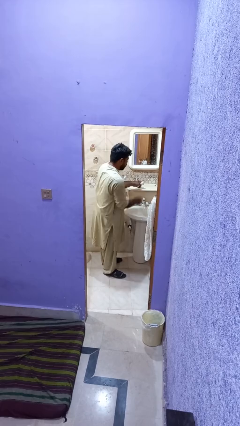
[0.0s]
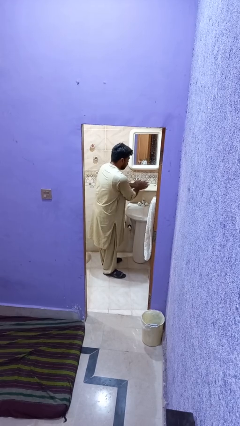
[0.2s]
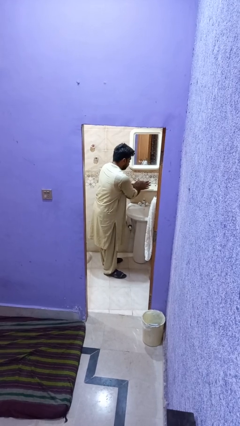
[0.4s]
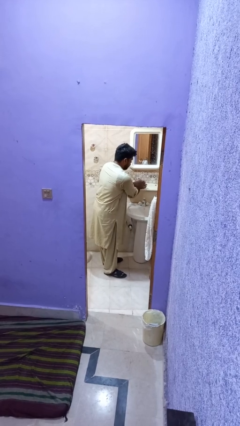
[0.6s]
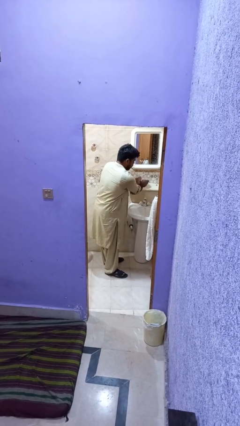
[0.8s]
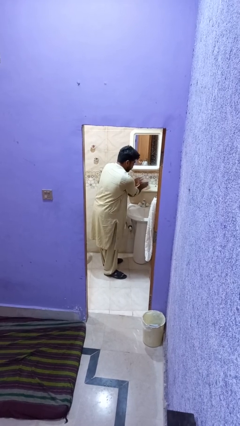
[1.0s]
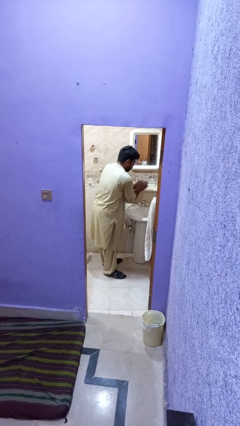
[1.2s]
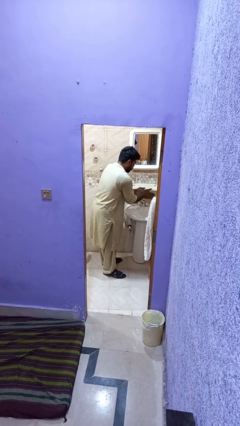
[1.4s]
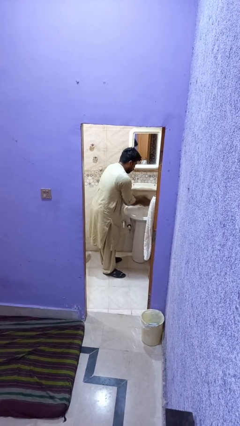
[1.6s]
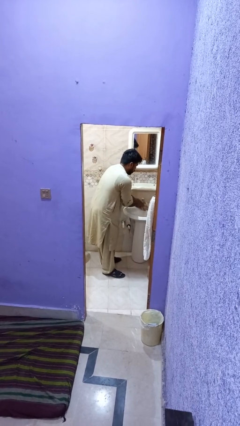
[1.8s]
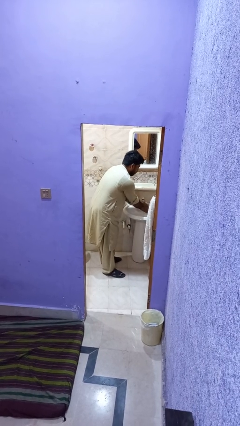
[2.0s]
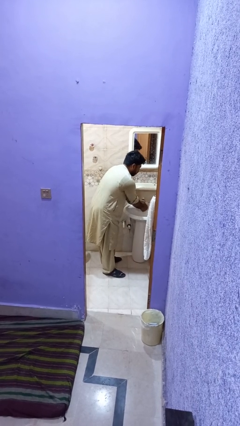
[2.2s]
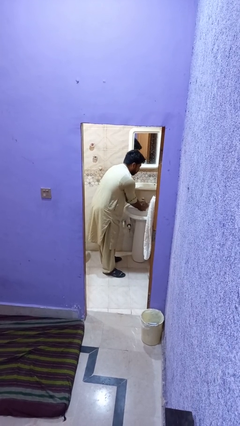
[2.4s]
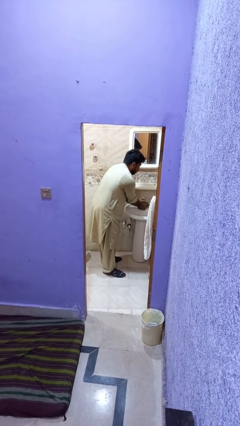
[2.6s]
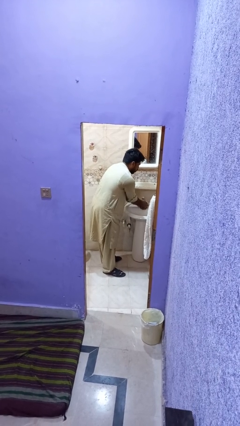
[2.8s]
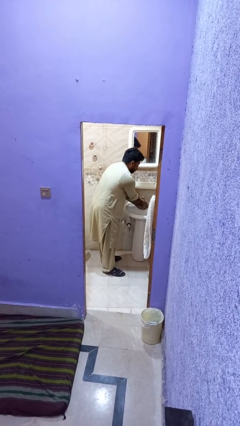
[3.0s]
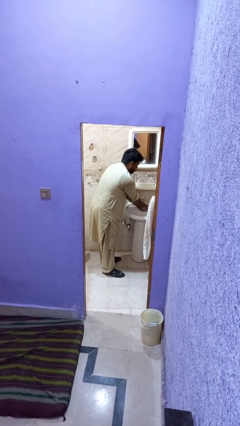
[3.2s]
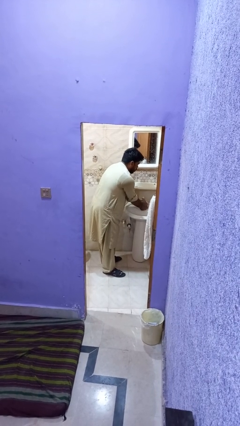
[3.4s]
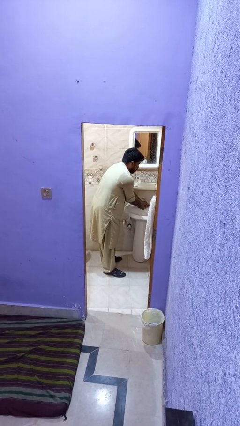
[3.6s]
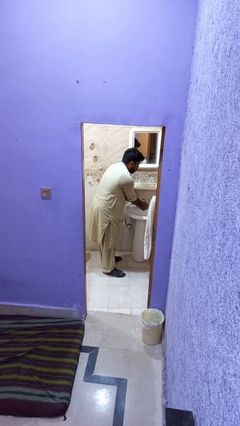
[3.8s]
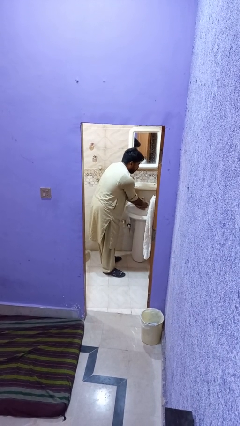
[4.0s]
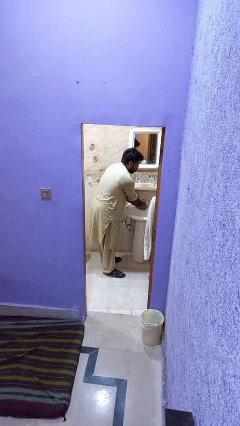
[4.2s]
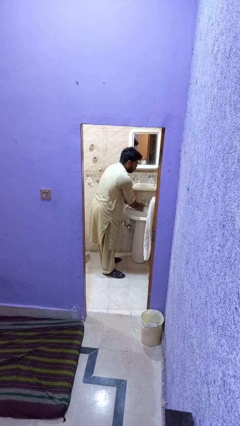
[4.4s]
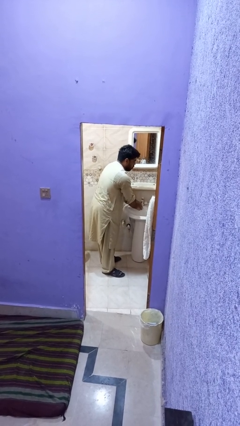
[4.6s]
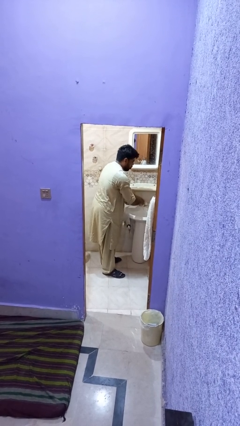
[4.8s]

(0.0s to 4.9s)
person washes hands

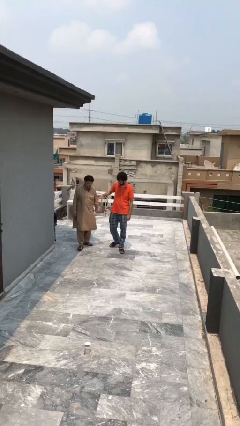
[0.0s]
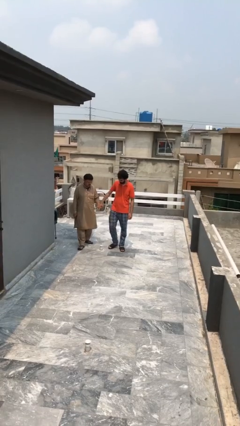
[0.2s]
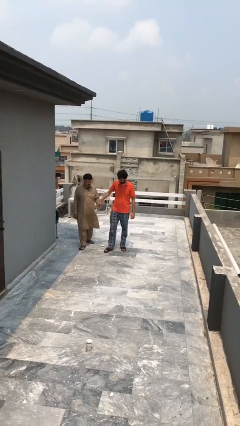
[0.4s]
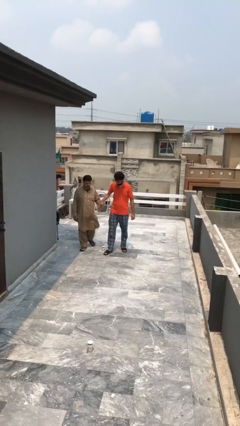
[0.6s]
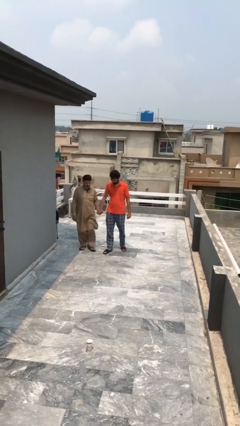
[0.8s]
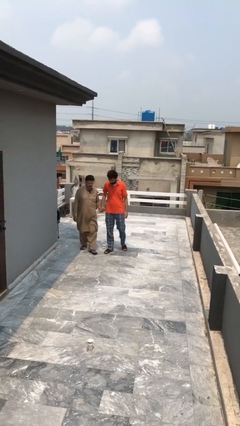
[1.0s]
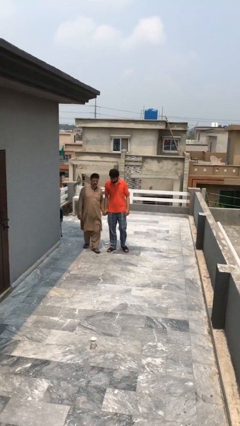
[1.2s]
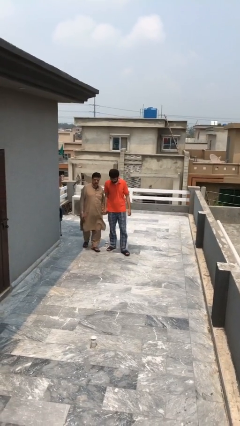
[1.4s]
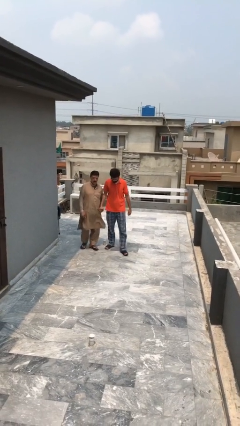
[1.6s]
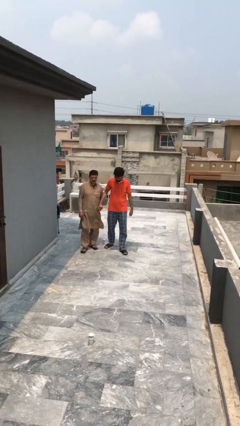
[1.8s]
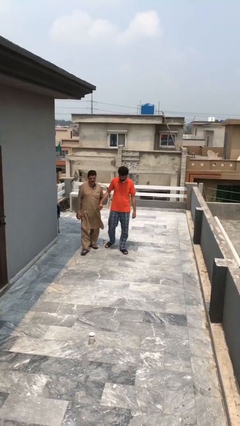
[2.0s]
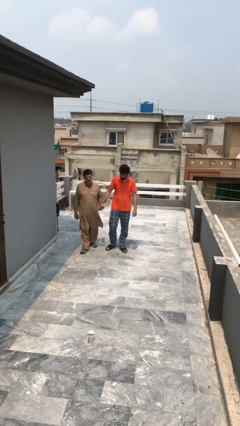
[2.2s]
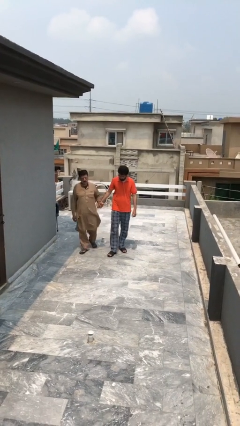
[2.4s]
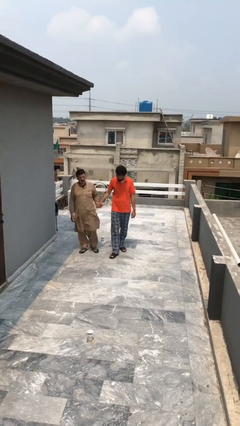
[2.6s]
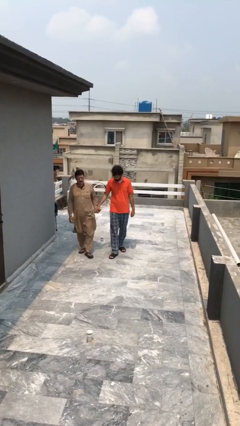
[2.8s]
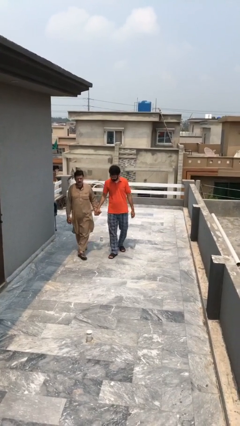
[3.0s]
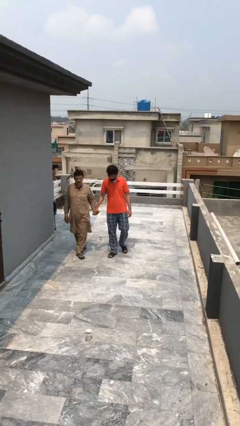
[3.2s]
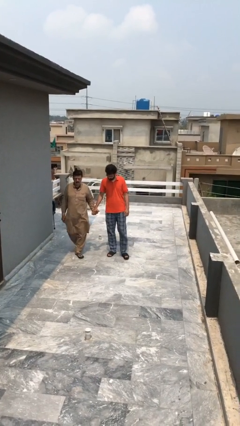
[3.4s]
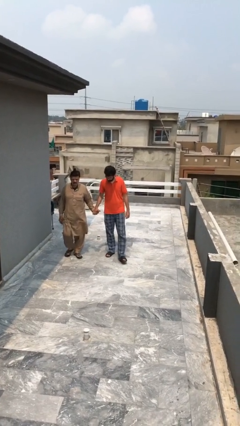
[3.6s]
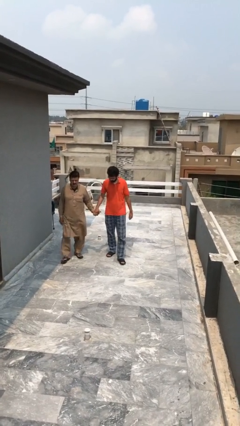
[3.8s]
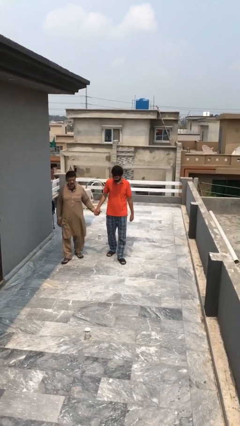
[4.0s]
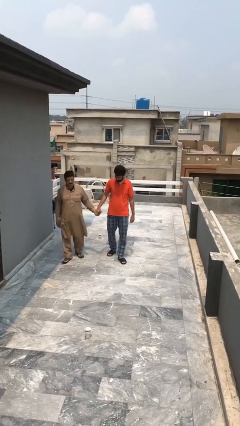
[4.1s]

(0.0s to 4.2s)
person holds hand

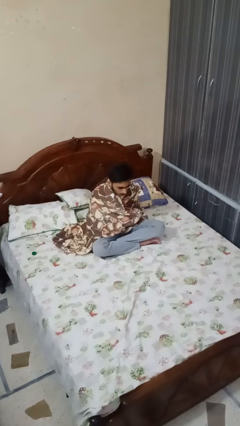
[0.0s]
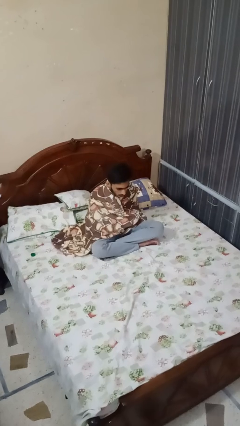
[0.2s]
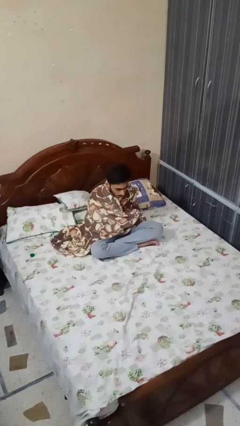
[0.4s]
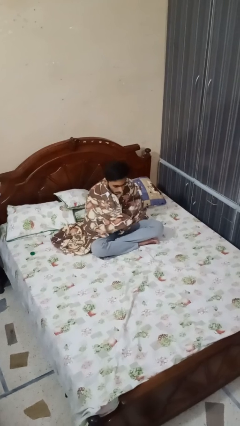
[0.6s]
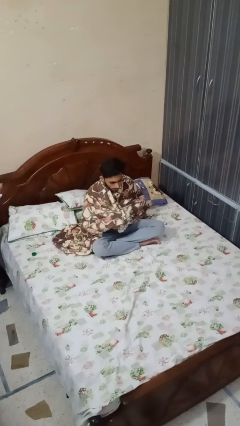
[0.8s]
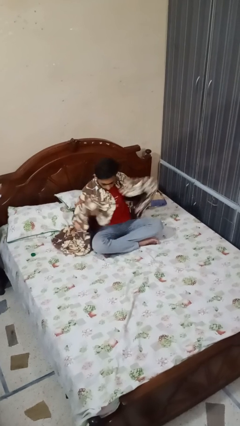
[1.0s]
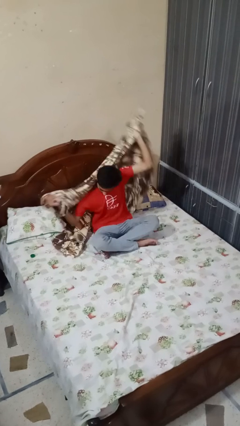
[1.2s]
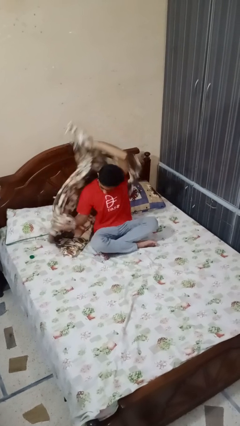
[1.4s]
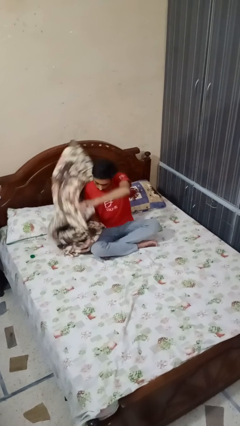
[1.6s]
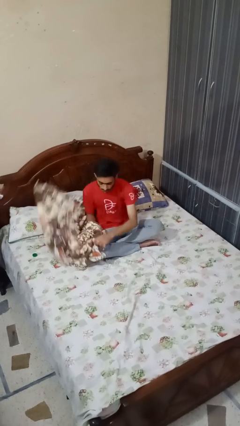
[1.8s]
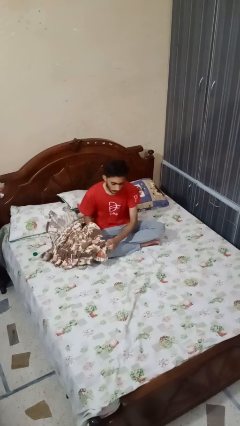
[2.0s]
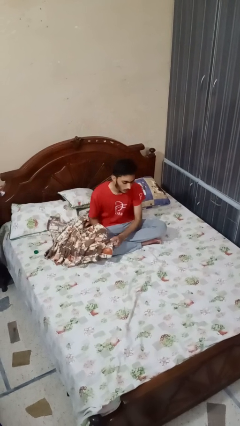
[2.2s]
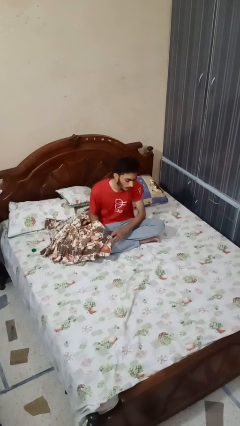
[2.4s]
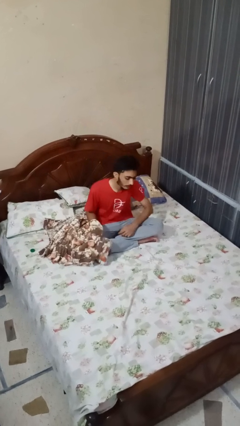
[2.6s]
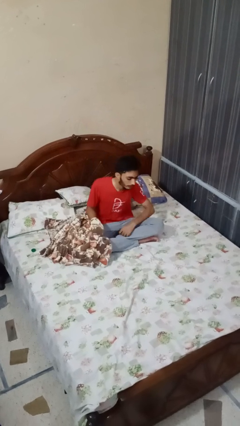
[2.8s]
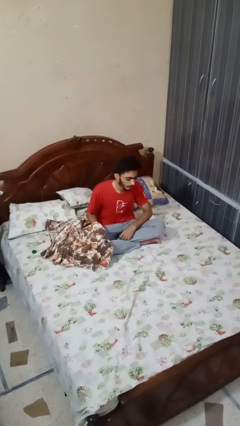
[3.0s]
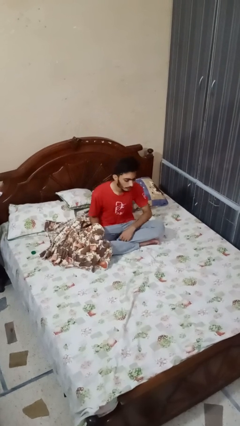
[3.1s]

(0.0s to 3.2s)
person uncovers with blanket

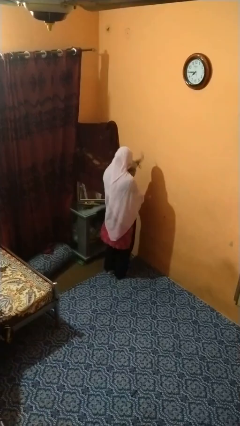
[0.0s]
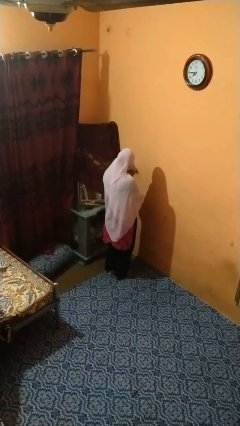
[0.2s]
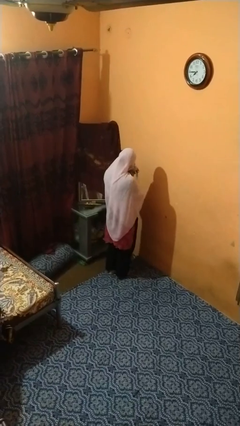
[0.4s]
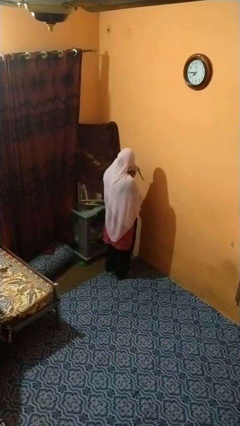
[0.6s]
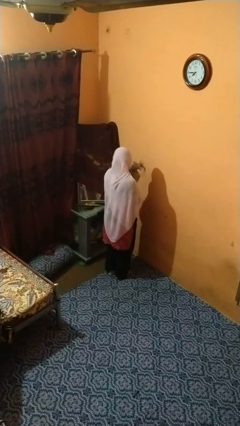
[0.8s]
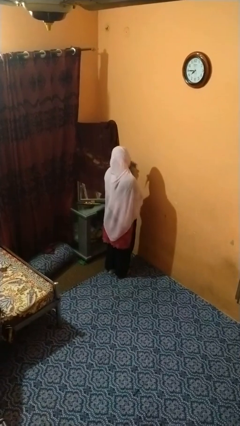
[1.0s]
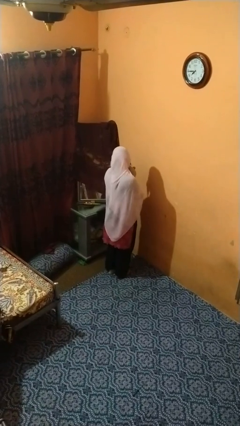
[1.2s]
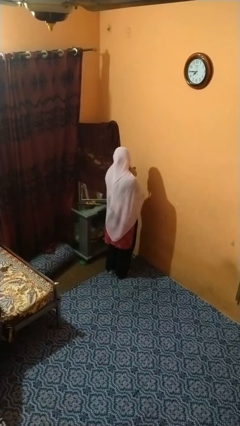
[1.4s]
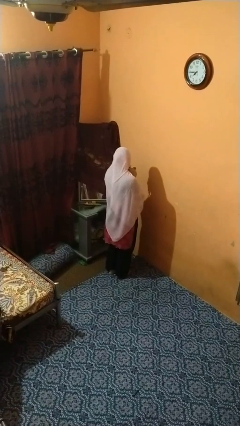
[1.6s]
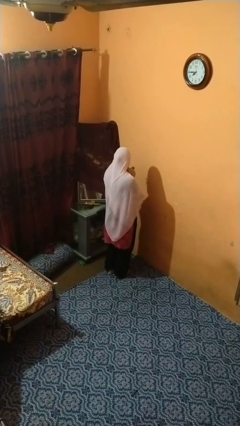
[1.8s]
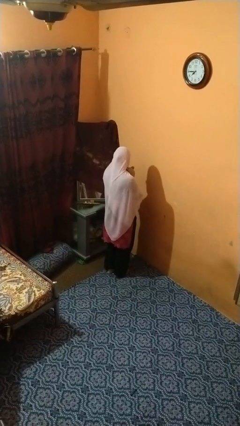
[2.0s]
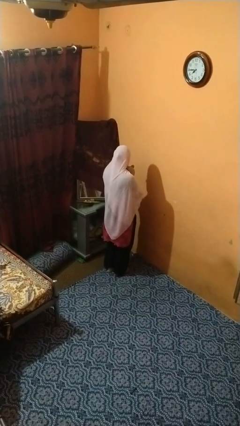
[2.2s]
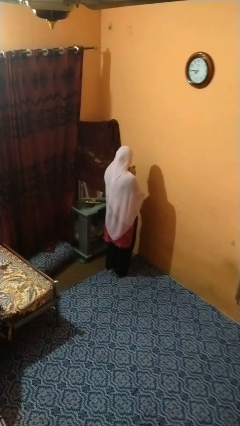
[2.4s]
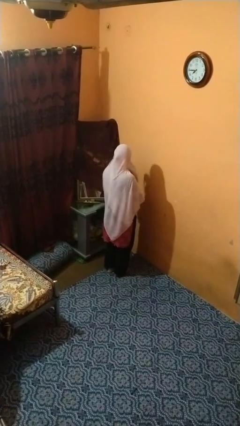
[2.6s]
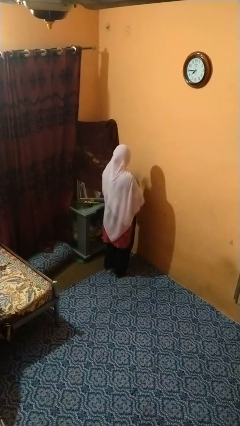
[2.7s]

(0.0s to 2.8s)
person hugs stuffed animal

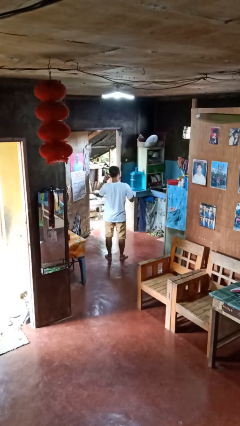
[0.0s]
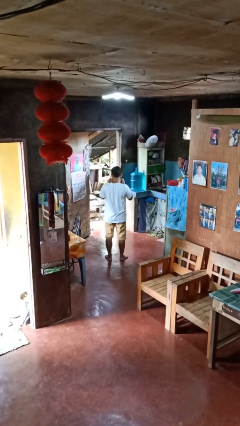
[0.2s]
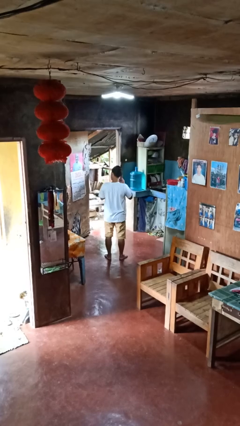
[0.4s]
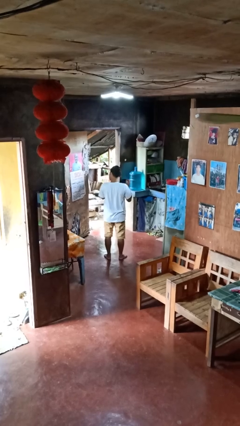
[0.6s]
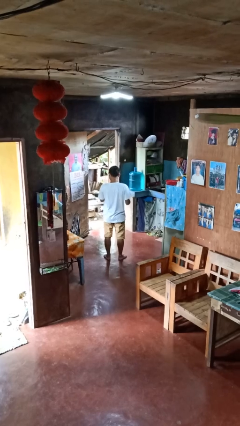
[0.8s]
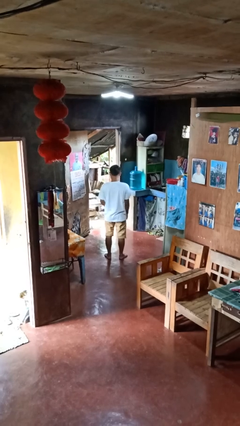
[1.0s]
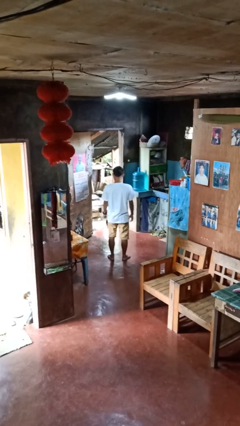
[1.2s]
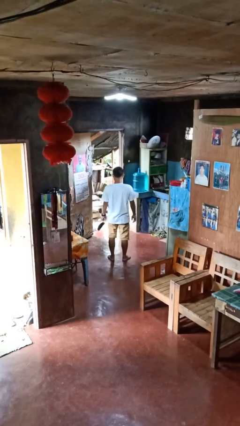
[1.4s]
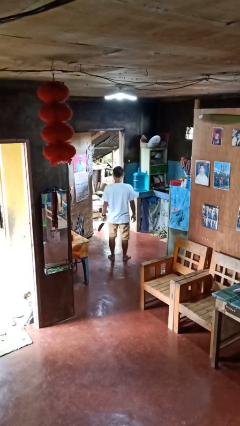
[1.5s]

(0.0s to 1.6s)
person takes off facemask

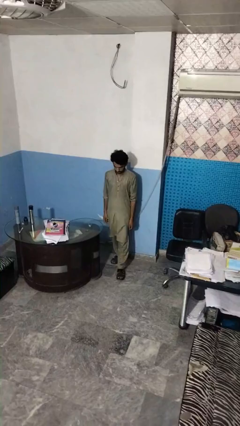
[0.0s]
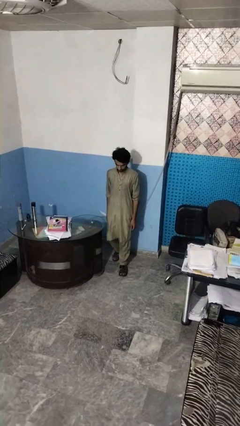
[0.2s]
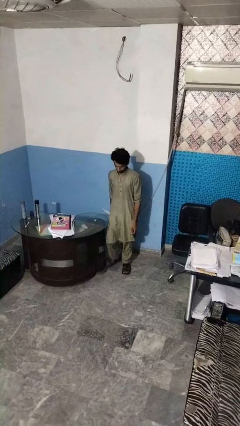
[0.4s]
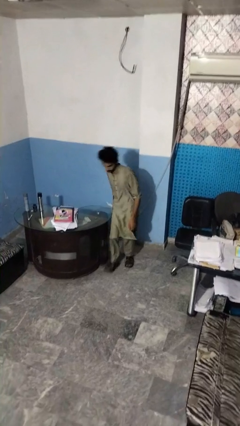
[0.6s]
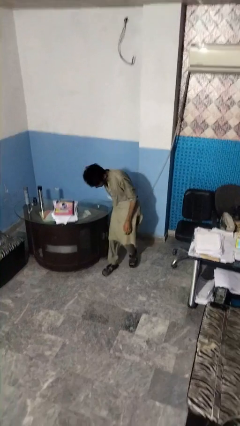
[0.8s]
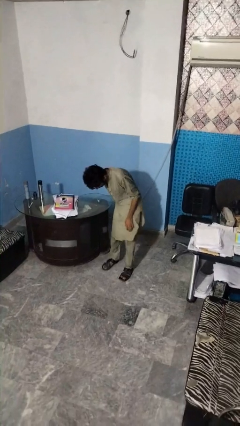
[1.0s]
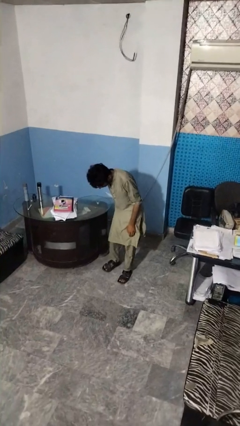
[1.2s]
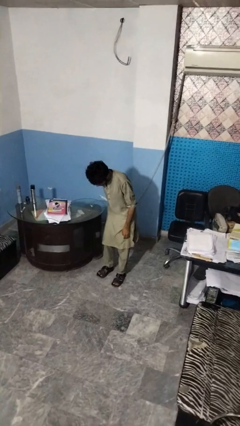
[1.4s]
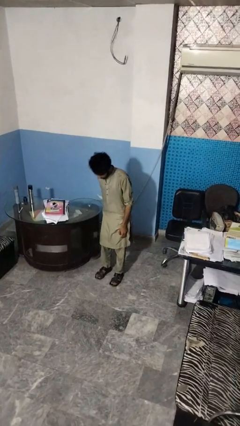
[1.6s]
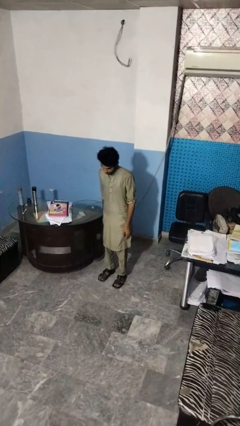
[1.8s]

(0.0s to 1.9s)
person bumps into table
